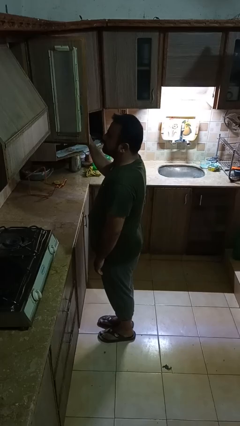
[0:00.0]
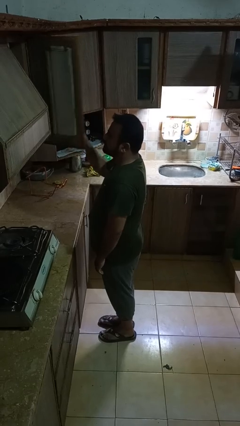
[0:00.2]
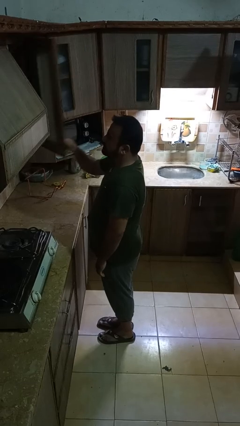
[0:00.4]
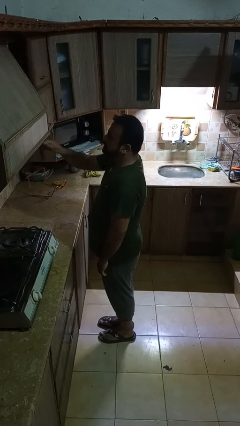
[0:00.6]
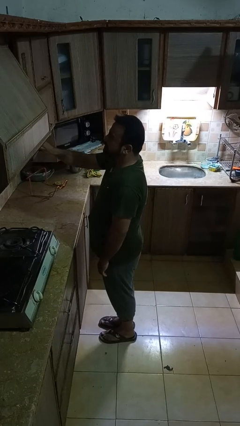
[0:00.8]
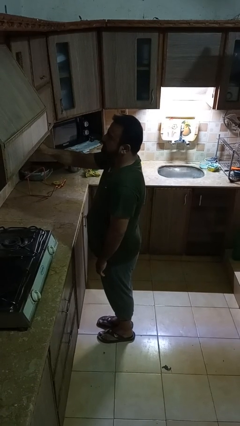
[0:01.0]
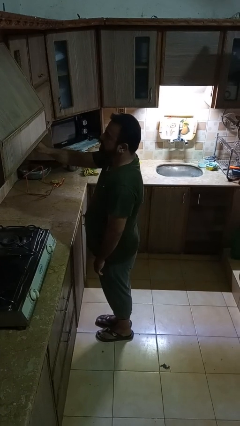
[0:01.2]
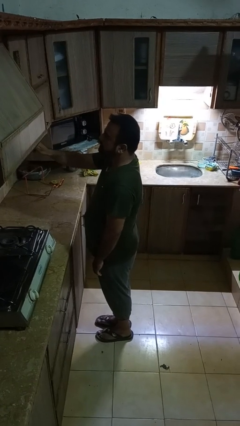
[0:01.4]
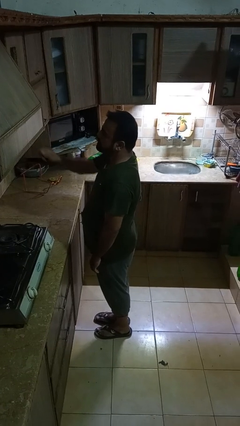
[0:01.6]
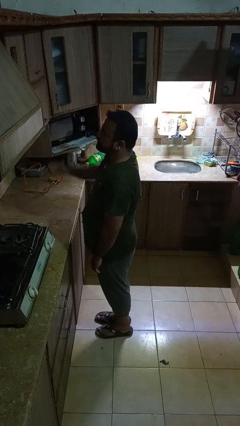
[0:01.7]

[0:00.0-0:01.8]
person closes cabinet

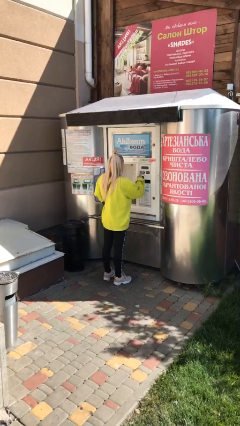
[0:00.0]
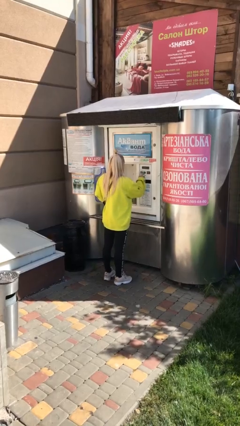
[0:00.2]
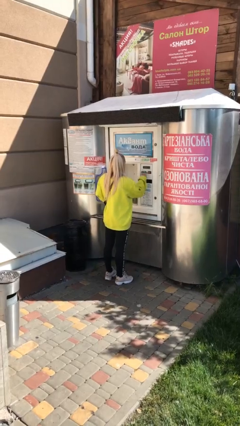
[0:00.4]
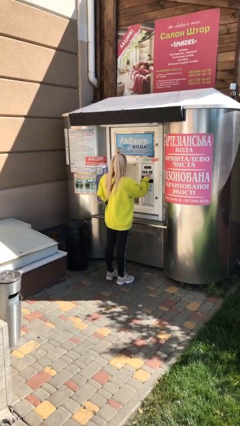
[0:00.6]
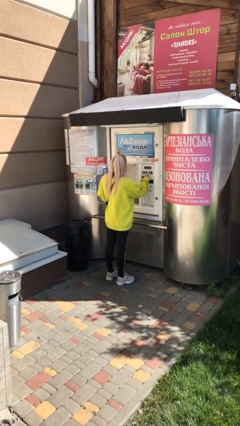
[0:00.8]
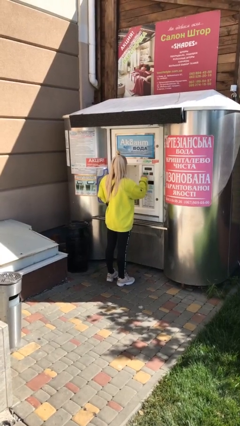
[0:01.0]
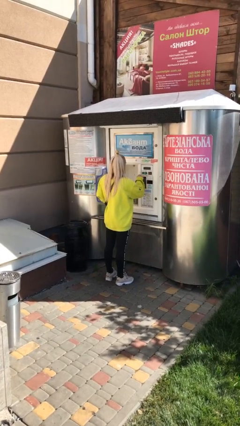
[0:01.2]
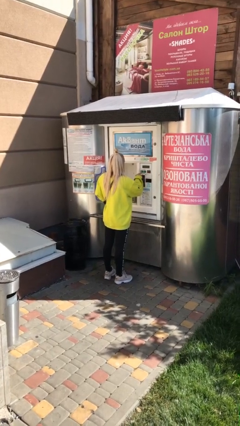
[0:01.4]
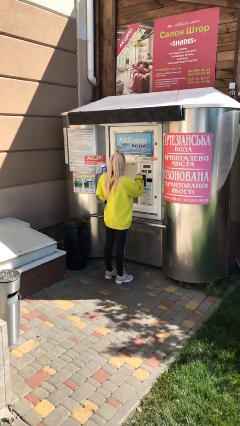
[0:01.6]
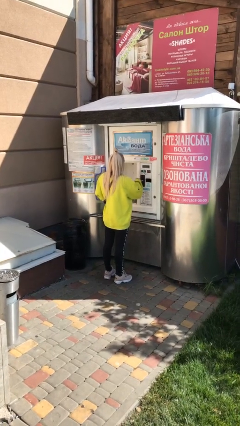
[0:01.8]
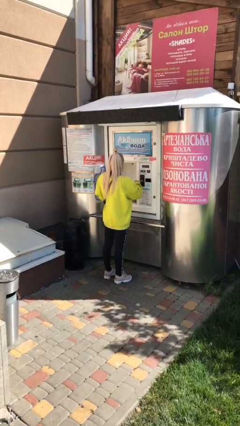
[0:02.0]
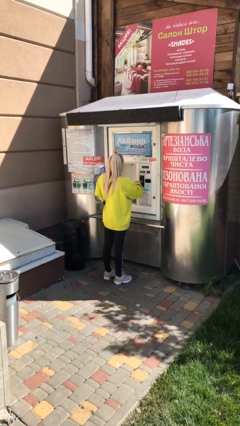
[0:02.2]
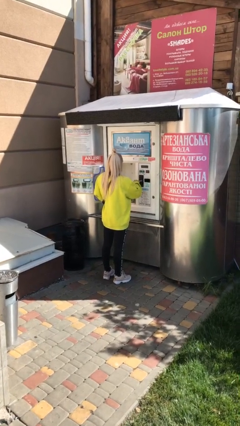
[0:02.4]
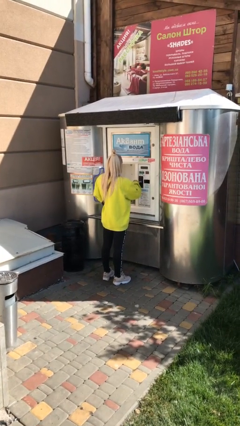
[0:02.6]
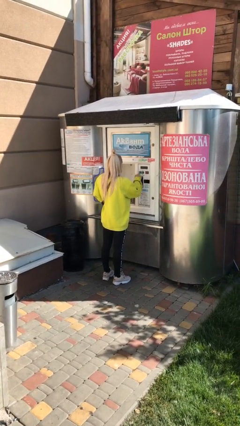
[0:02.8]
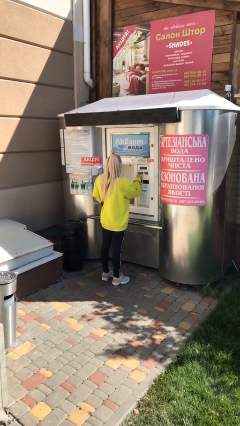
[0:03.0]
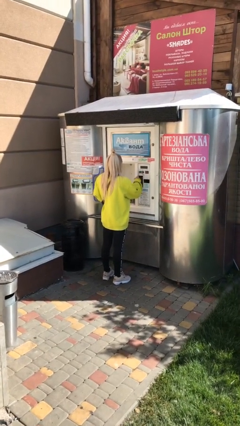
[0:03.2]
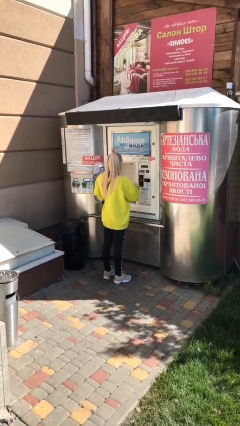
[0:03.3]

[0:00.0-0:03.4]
person purchases from machine

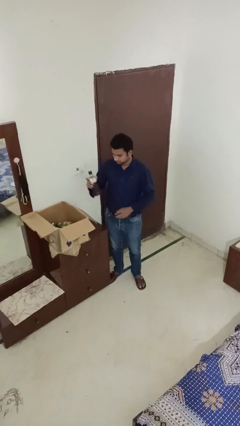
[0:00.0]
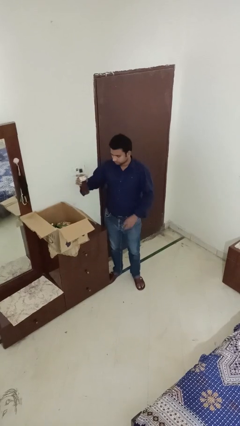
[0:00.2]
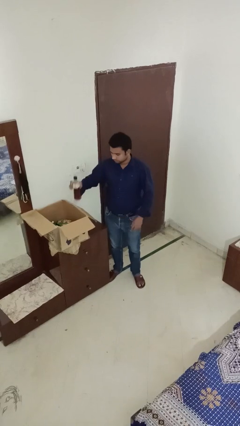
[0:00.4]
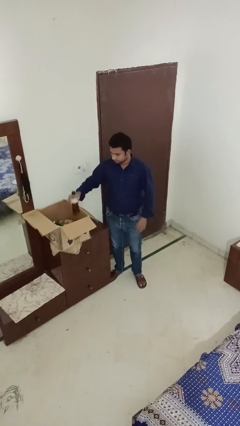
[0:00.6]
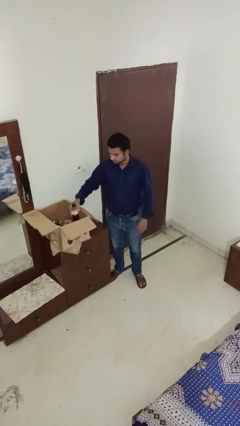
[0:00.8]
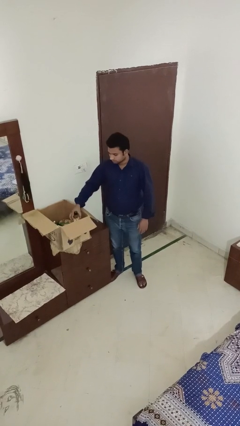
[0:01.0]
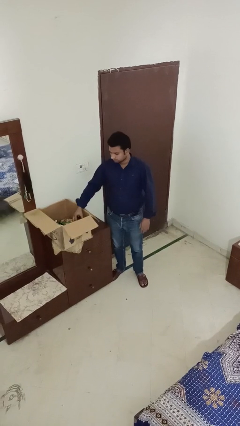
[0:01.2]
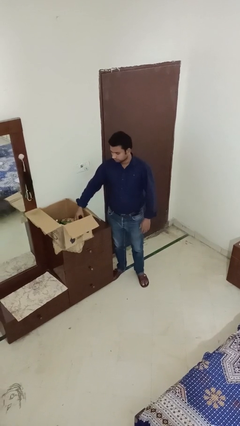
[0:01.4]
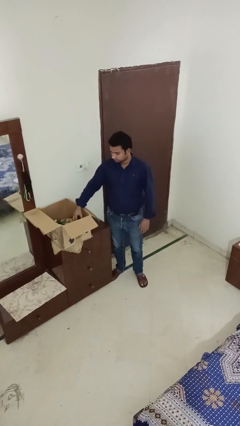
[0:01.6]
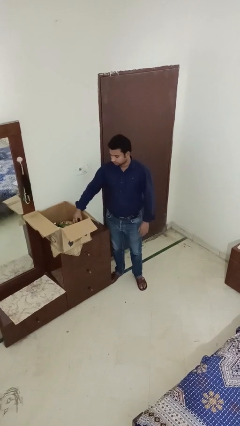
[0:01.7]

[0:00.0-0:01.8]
person puts object into box

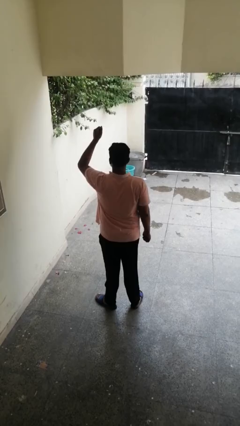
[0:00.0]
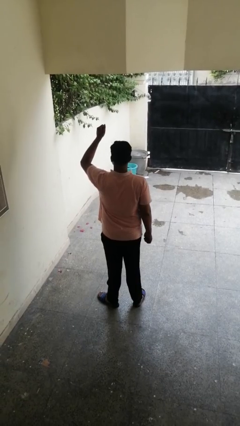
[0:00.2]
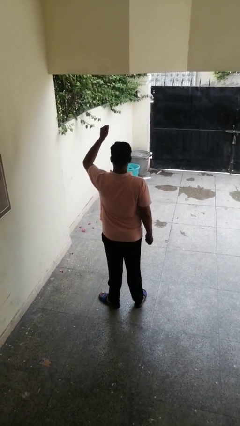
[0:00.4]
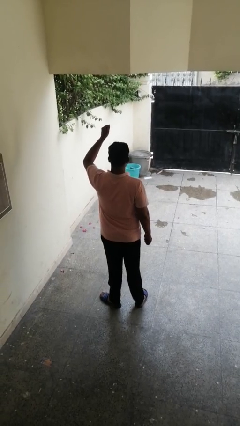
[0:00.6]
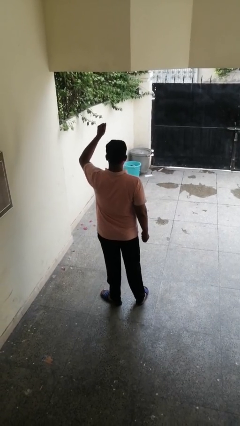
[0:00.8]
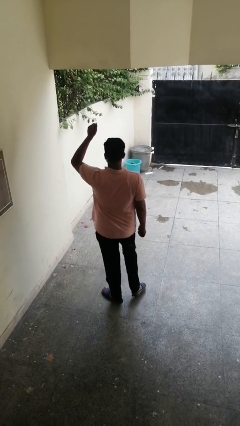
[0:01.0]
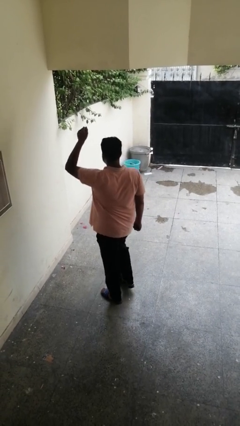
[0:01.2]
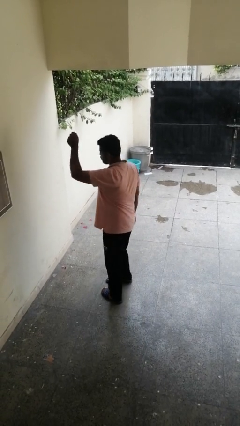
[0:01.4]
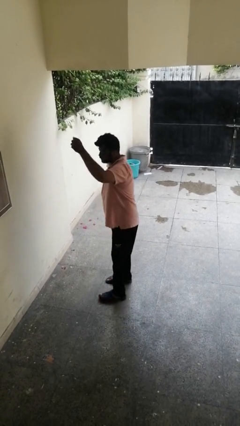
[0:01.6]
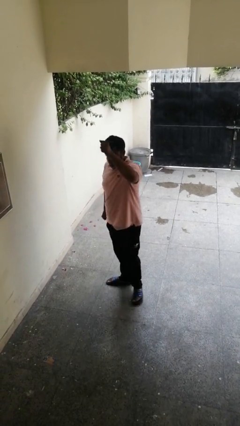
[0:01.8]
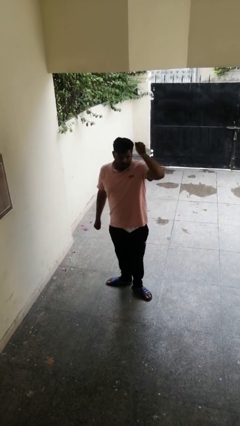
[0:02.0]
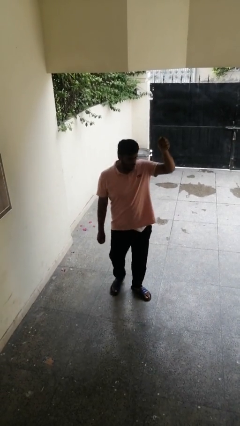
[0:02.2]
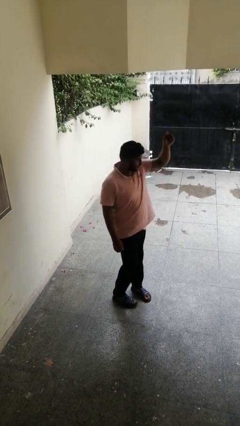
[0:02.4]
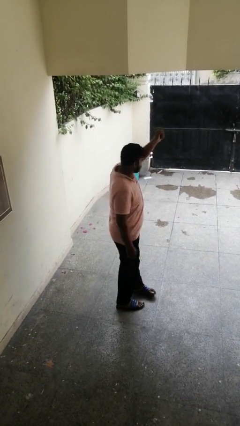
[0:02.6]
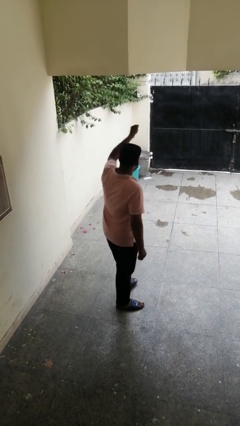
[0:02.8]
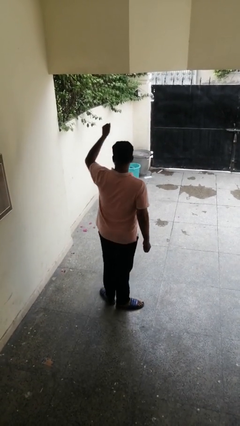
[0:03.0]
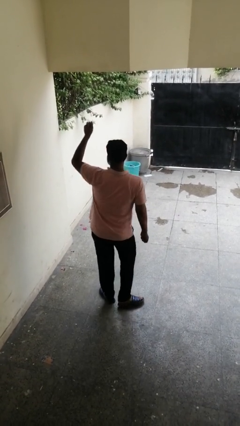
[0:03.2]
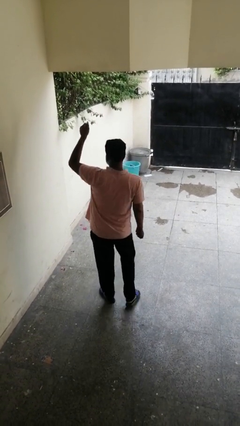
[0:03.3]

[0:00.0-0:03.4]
person twirls

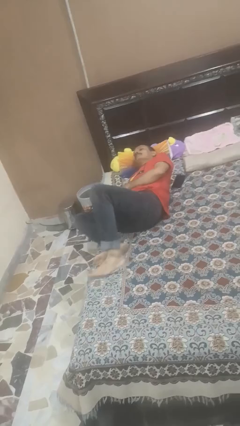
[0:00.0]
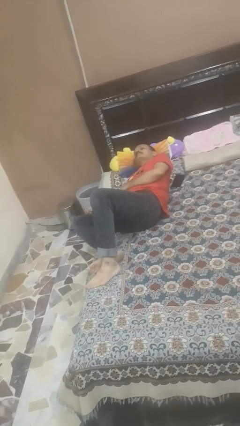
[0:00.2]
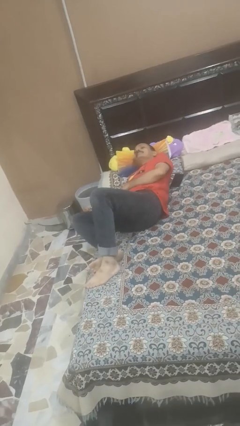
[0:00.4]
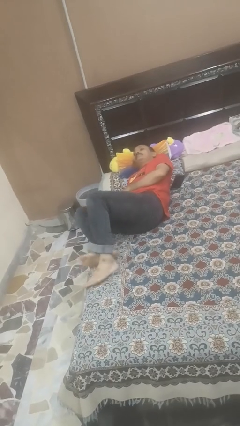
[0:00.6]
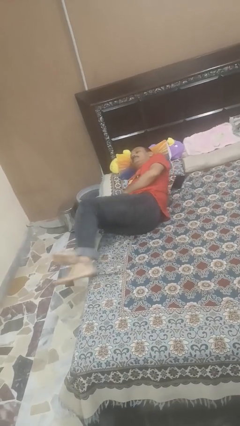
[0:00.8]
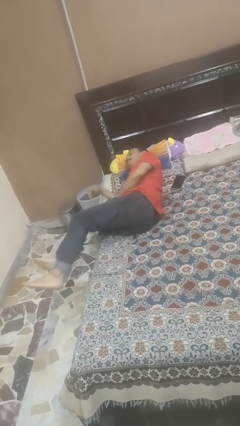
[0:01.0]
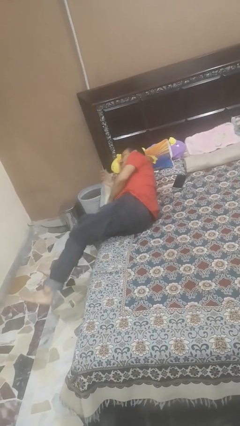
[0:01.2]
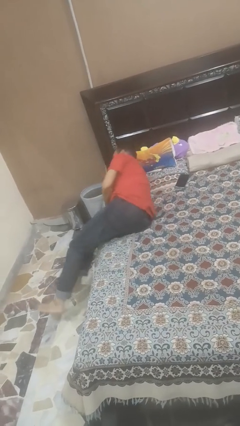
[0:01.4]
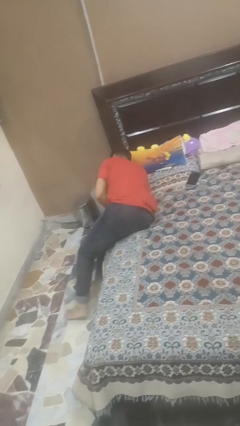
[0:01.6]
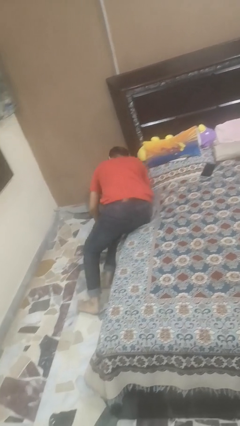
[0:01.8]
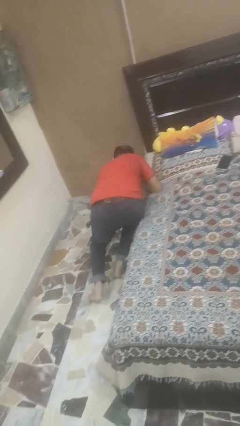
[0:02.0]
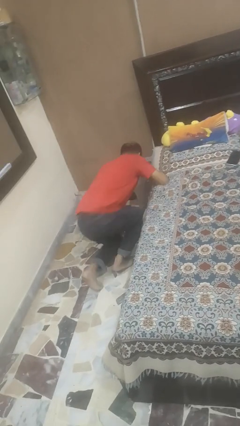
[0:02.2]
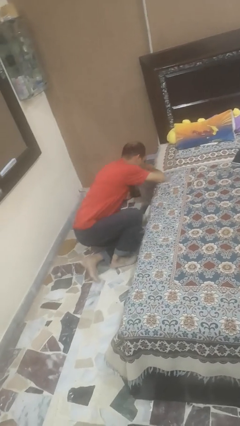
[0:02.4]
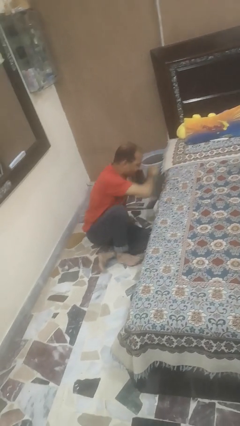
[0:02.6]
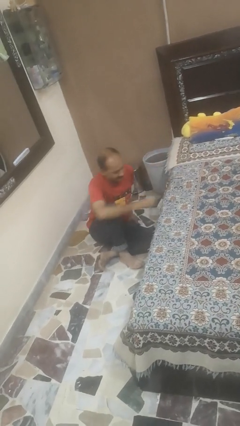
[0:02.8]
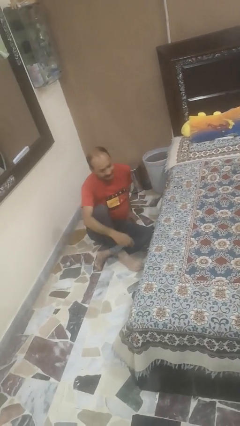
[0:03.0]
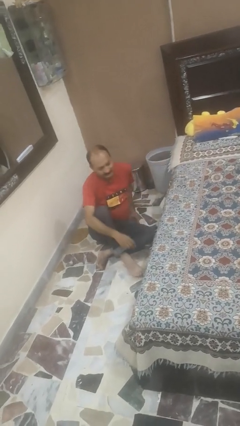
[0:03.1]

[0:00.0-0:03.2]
person falls from bed

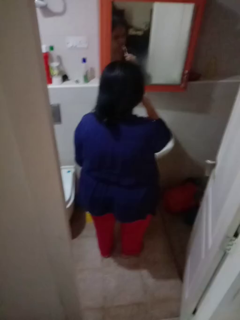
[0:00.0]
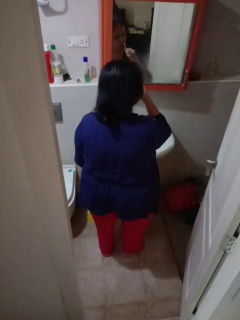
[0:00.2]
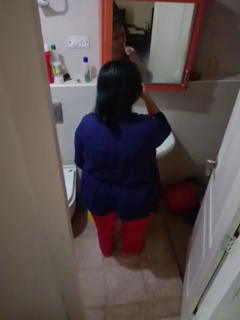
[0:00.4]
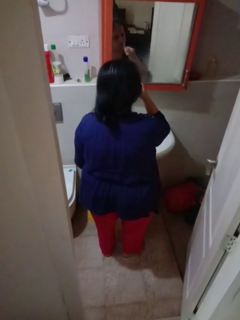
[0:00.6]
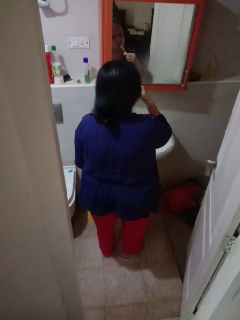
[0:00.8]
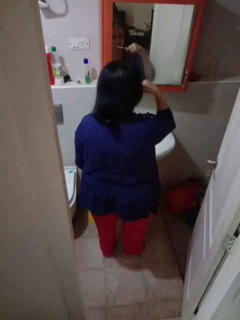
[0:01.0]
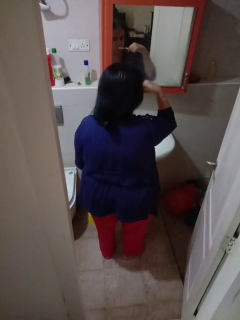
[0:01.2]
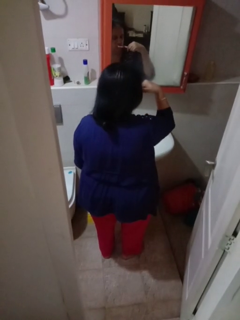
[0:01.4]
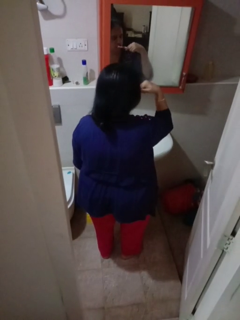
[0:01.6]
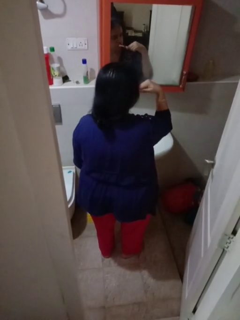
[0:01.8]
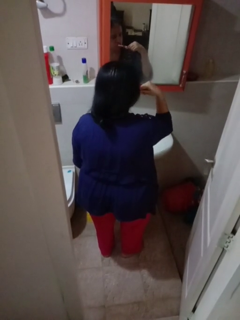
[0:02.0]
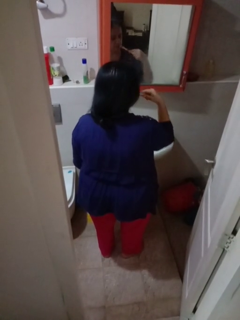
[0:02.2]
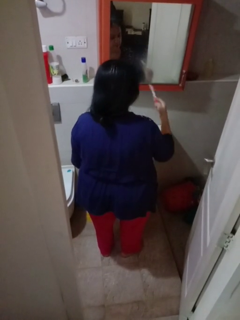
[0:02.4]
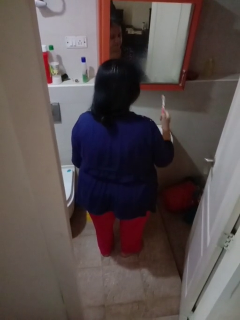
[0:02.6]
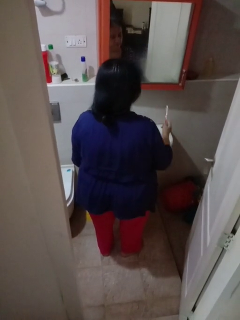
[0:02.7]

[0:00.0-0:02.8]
person brushes teeth

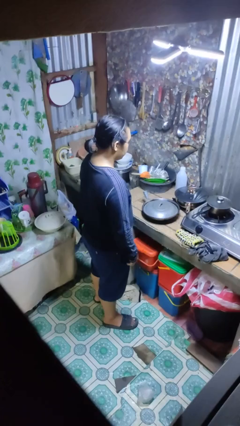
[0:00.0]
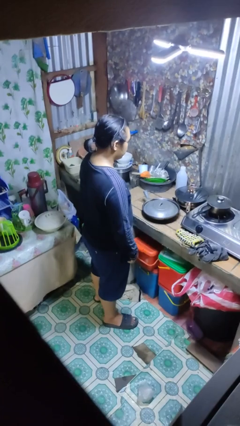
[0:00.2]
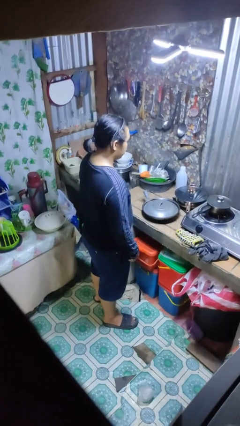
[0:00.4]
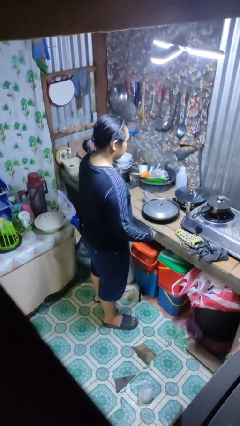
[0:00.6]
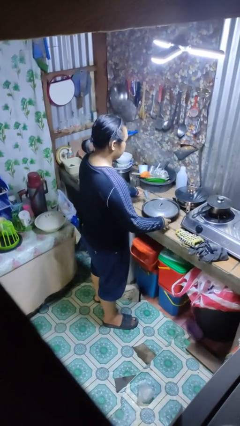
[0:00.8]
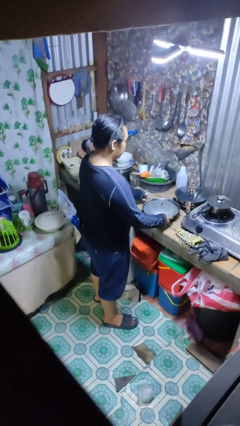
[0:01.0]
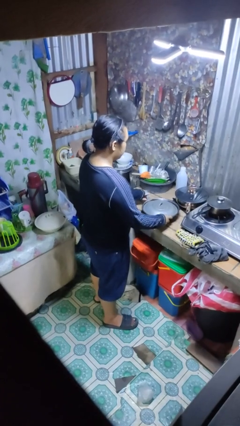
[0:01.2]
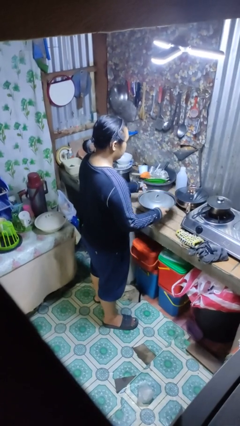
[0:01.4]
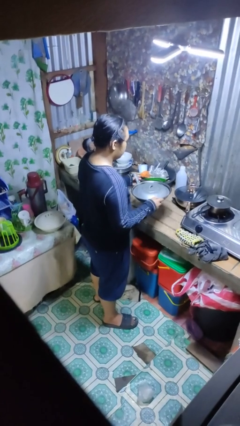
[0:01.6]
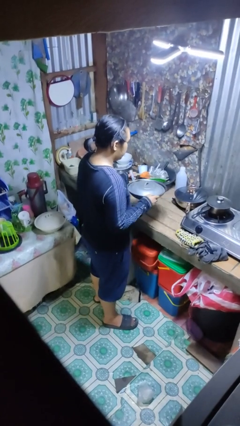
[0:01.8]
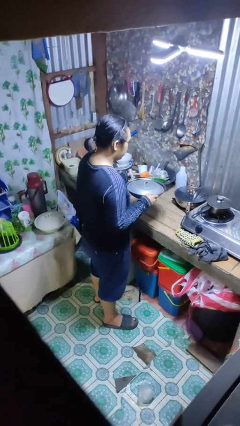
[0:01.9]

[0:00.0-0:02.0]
person picks up object from countertop
